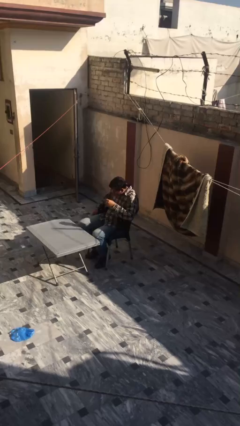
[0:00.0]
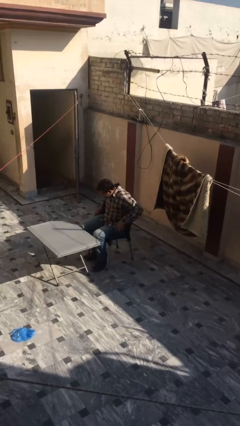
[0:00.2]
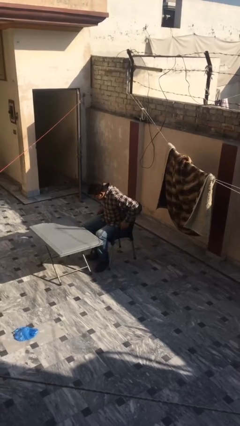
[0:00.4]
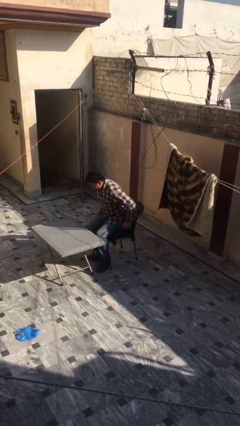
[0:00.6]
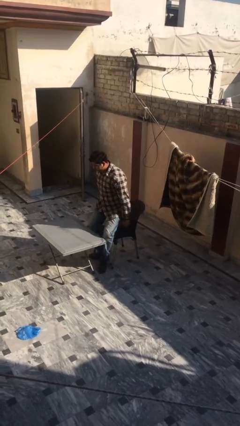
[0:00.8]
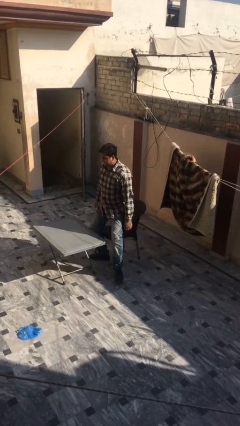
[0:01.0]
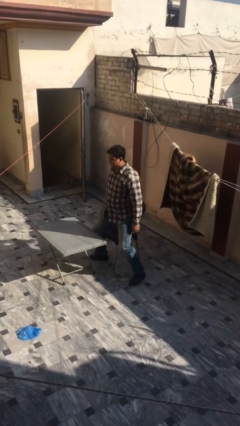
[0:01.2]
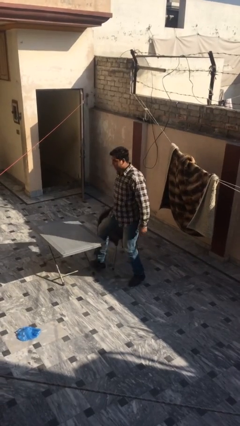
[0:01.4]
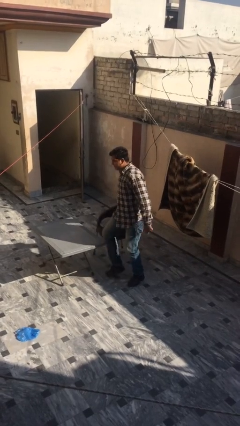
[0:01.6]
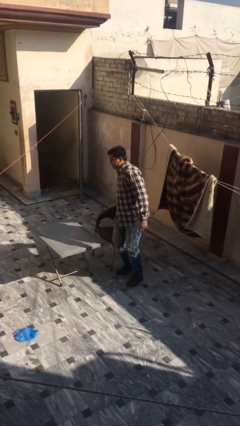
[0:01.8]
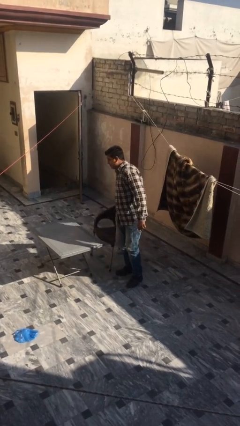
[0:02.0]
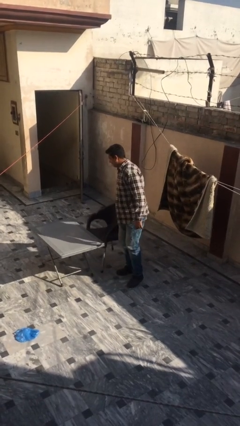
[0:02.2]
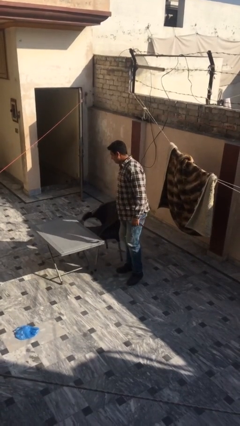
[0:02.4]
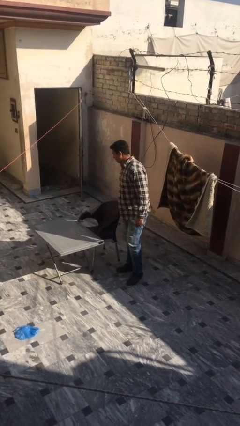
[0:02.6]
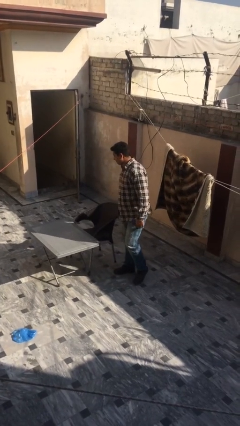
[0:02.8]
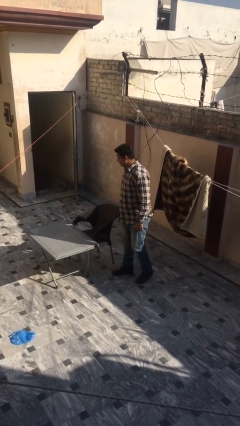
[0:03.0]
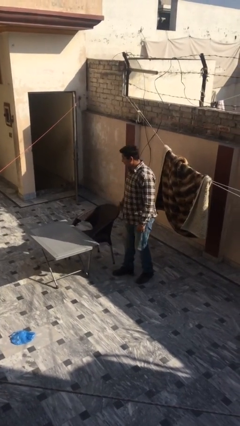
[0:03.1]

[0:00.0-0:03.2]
person stands up

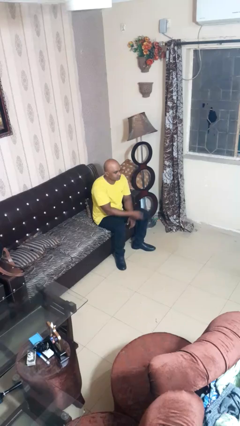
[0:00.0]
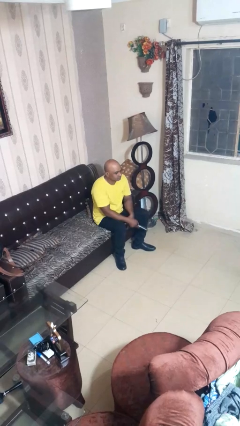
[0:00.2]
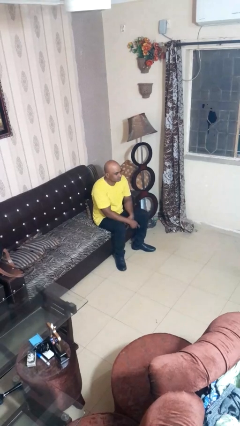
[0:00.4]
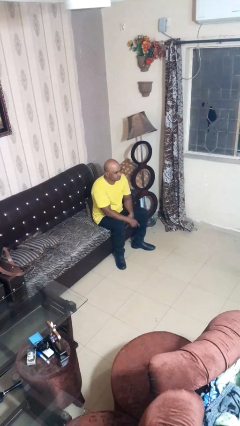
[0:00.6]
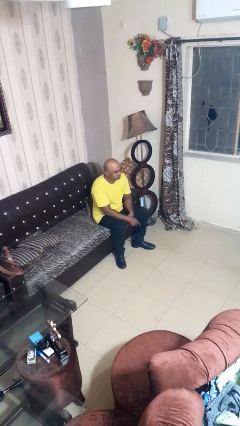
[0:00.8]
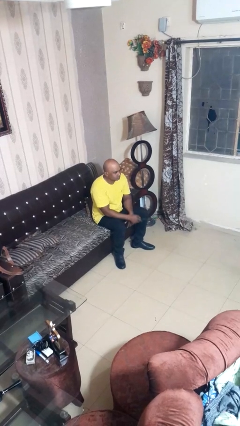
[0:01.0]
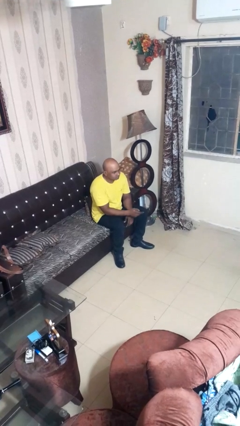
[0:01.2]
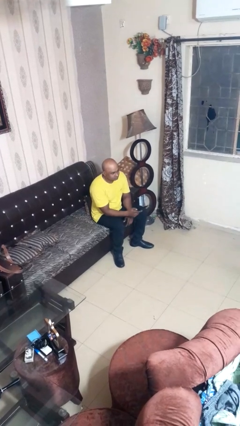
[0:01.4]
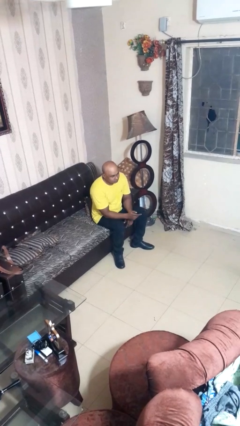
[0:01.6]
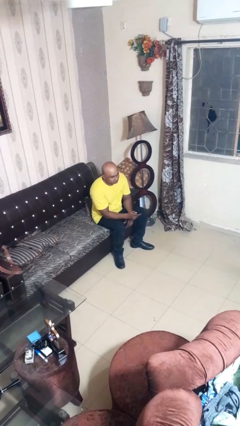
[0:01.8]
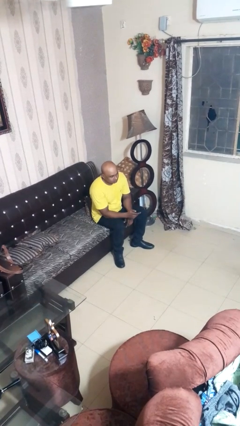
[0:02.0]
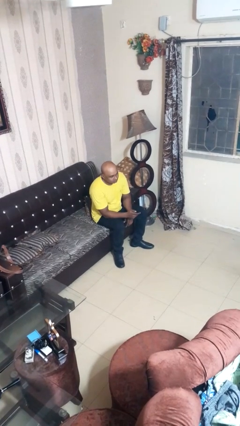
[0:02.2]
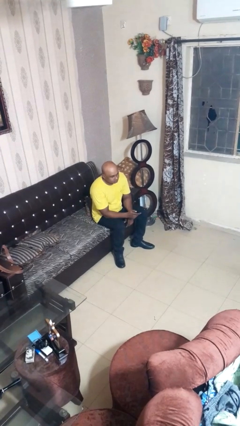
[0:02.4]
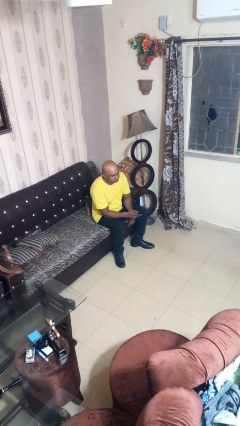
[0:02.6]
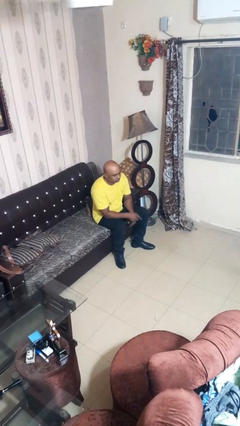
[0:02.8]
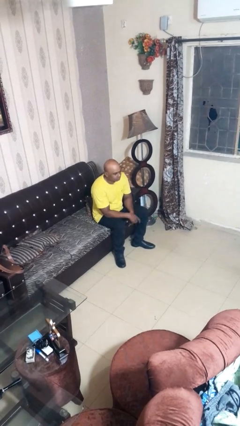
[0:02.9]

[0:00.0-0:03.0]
person uses television remote

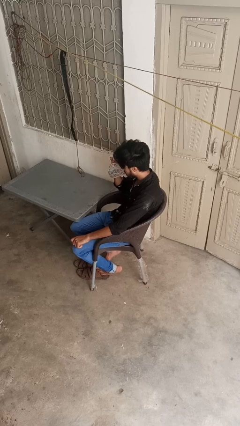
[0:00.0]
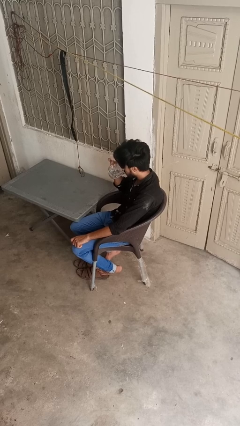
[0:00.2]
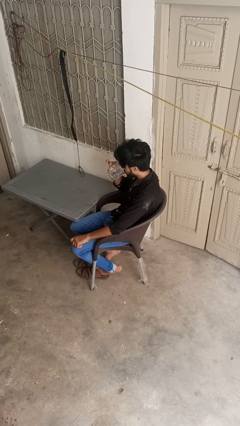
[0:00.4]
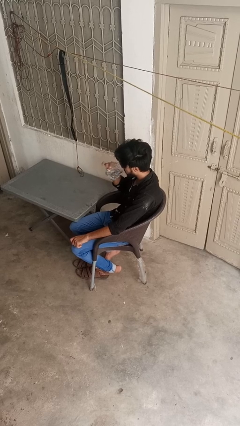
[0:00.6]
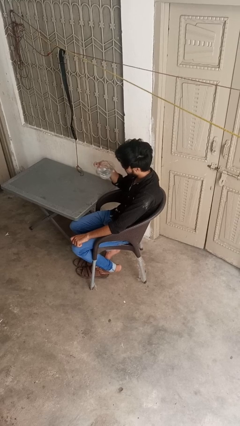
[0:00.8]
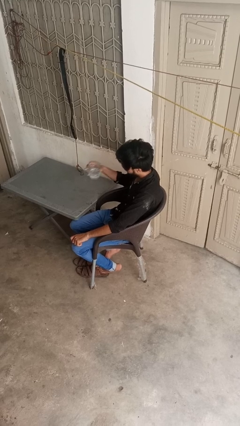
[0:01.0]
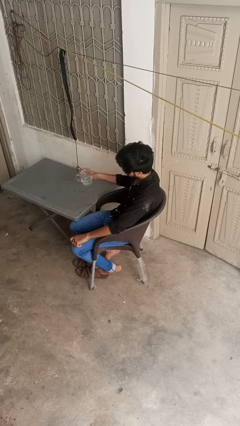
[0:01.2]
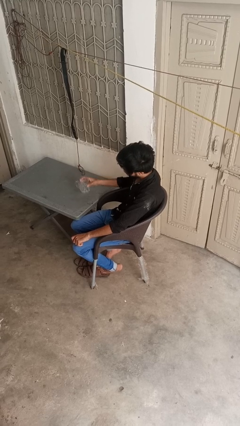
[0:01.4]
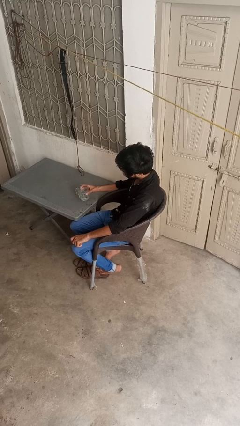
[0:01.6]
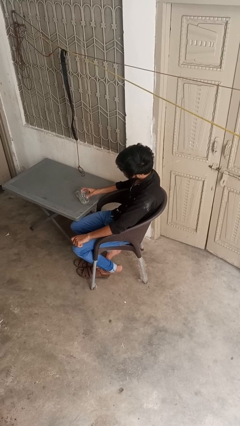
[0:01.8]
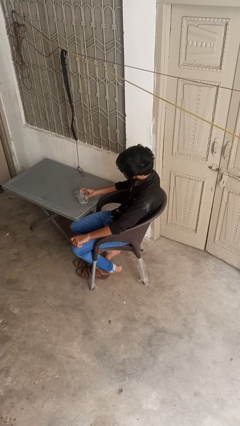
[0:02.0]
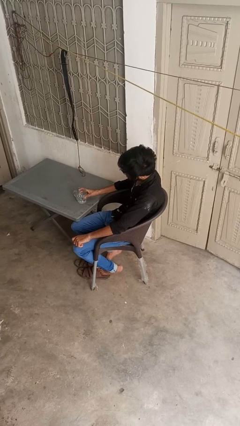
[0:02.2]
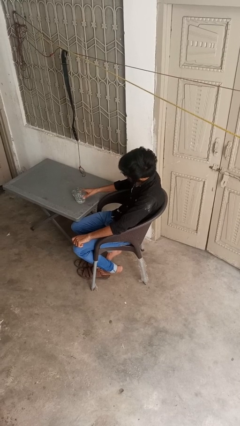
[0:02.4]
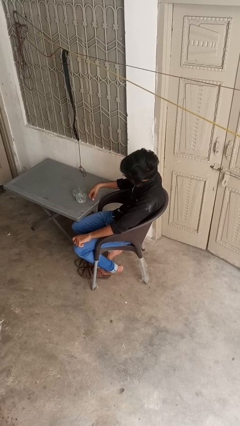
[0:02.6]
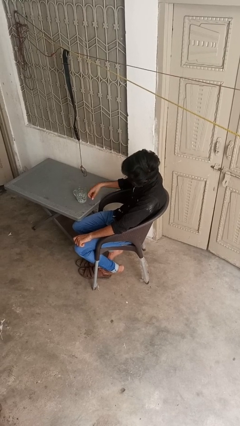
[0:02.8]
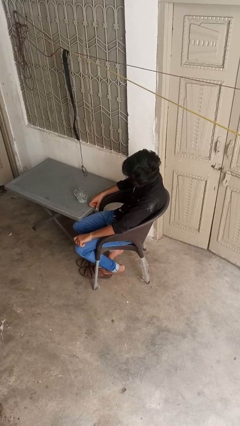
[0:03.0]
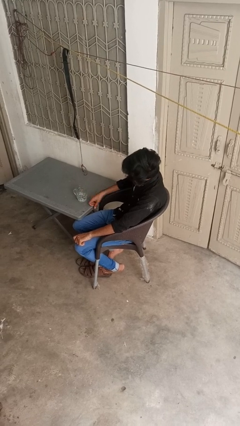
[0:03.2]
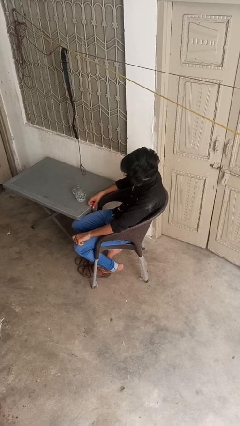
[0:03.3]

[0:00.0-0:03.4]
person puts down object on table

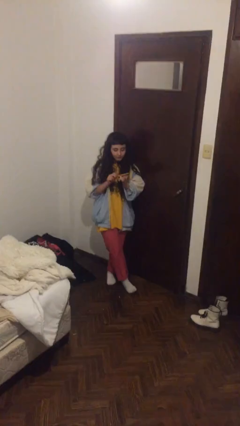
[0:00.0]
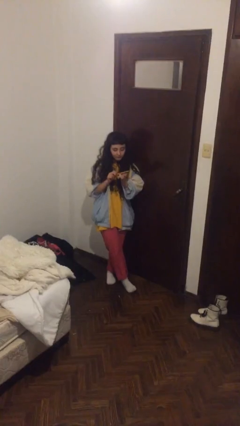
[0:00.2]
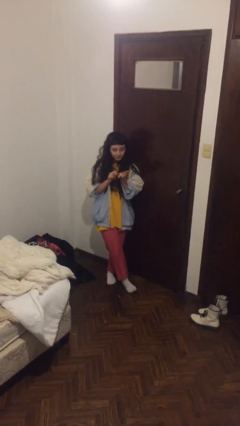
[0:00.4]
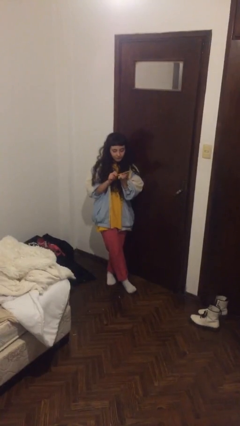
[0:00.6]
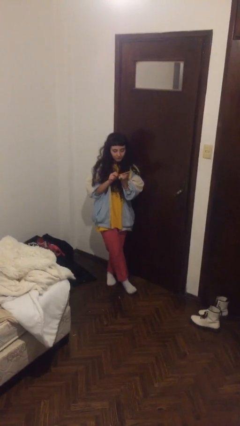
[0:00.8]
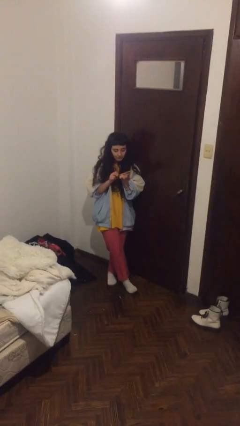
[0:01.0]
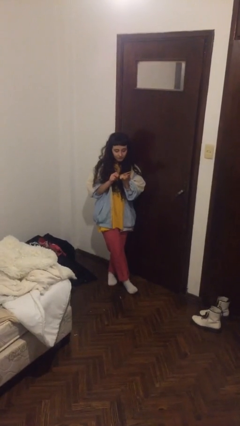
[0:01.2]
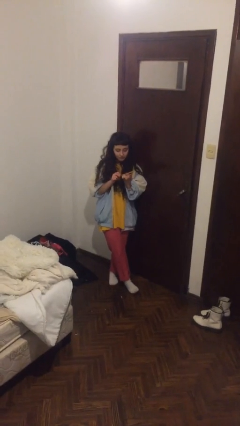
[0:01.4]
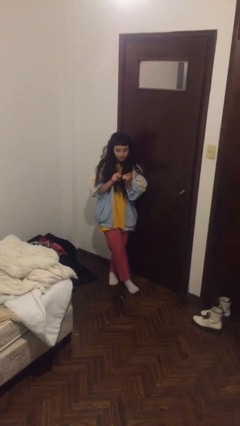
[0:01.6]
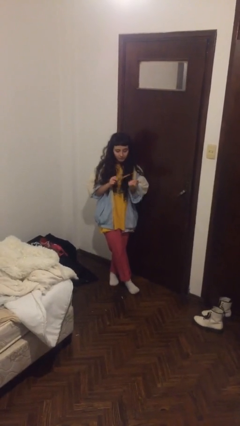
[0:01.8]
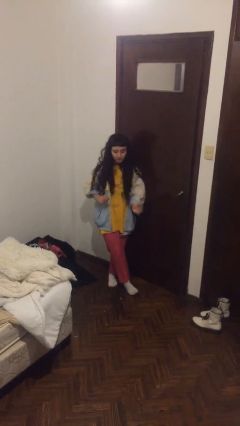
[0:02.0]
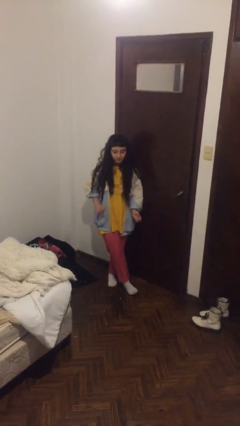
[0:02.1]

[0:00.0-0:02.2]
person files fingernails

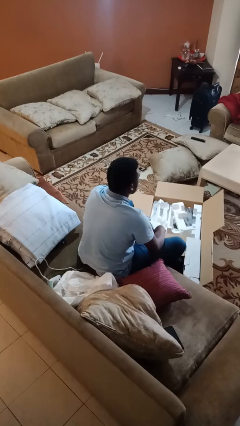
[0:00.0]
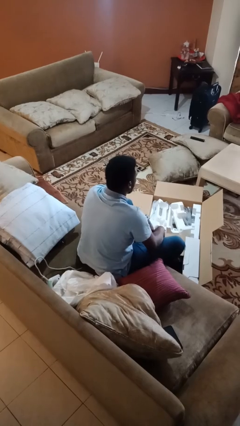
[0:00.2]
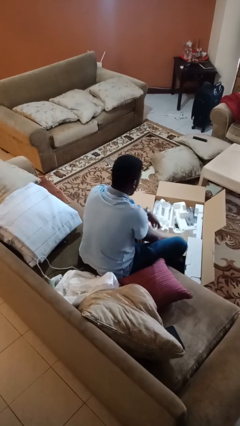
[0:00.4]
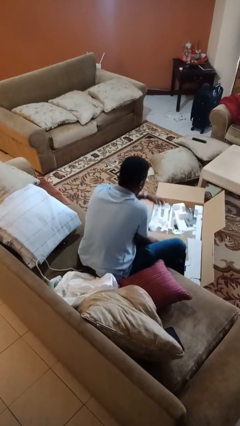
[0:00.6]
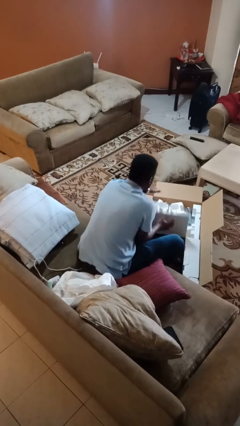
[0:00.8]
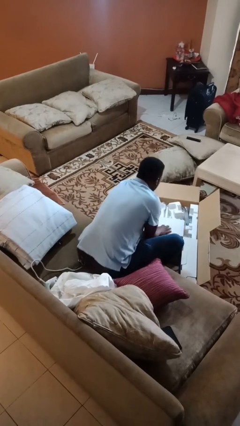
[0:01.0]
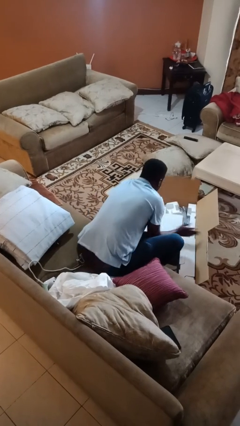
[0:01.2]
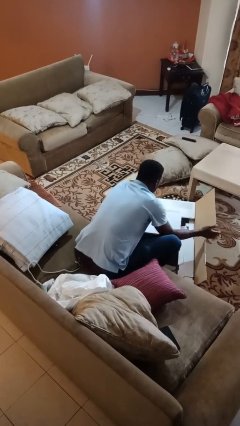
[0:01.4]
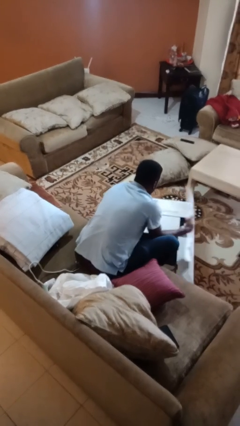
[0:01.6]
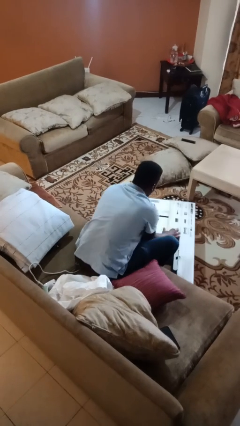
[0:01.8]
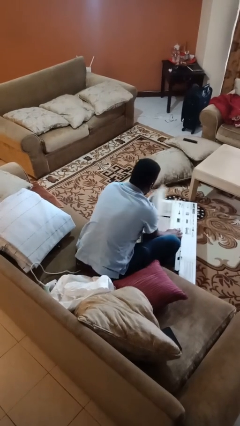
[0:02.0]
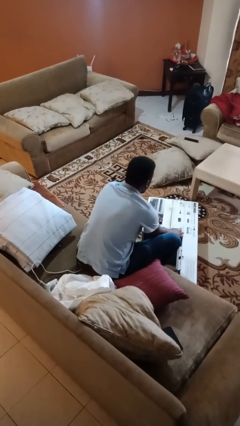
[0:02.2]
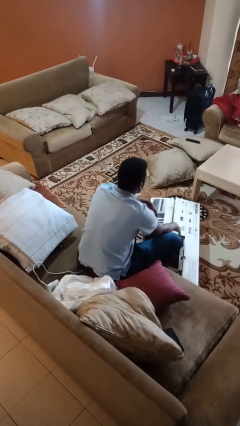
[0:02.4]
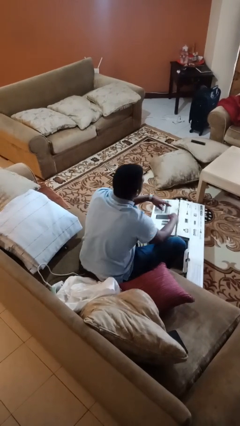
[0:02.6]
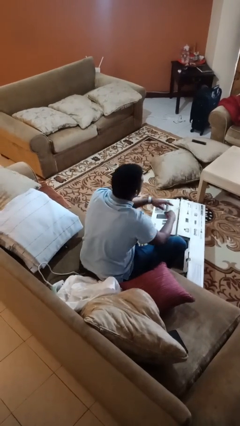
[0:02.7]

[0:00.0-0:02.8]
person closes box

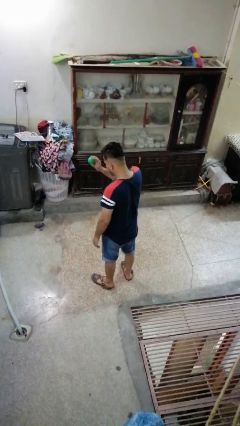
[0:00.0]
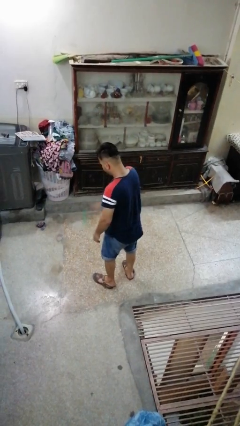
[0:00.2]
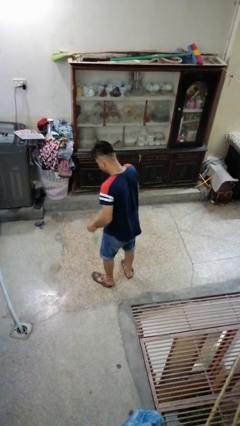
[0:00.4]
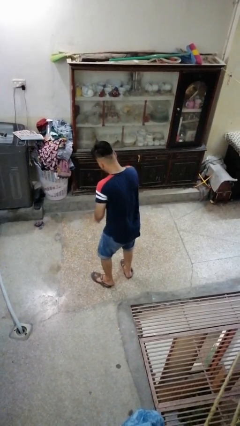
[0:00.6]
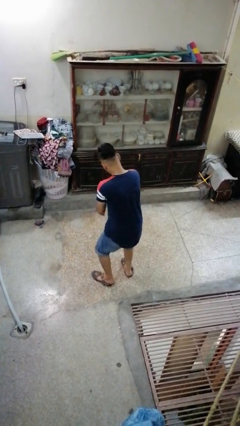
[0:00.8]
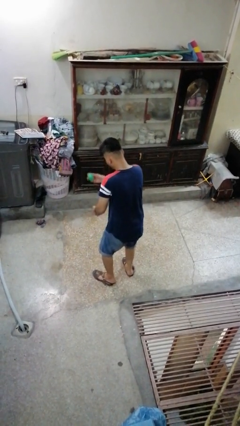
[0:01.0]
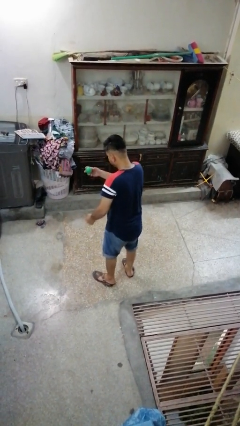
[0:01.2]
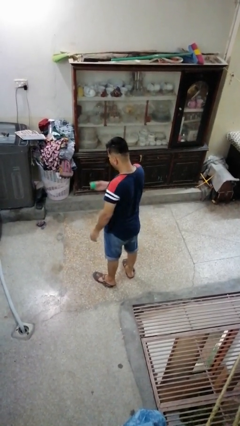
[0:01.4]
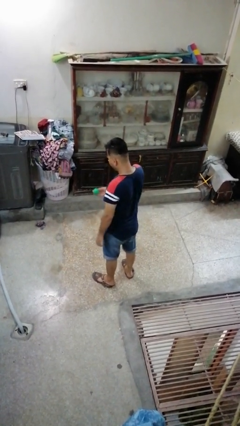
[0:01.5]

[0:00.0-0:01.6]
person bounces ball on floor

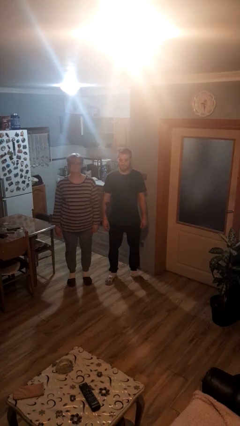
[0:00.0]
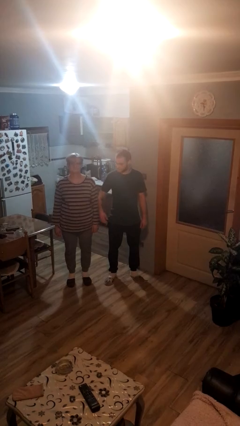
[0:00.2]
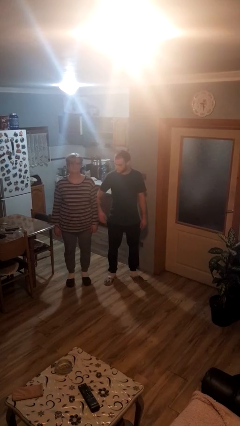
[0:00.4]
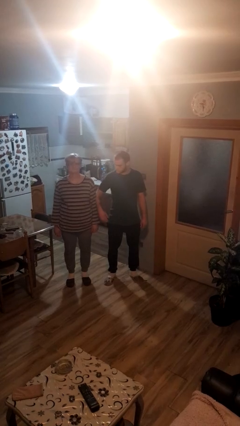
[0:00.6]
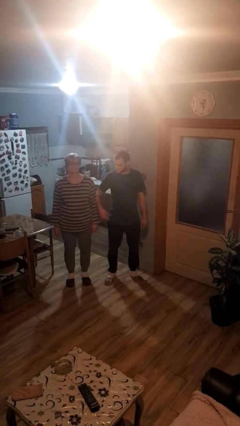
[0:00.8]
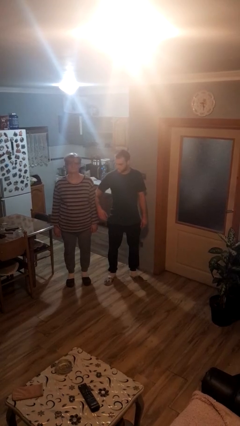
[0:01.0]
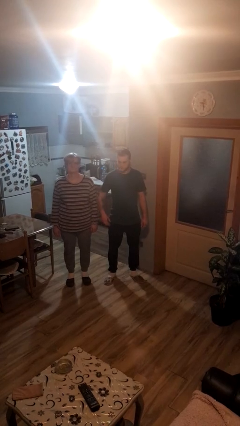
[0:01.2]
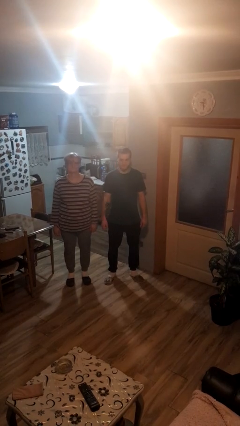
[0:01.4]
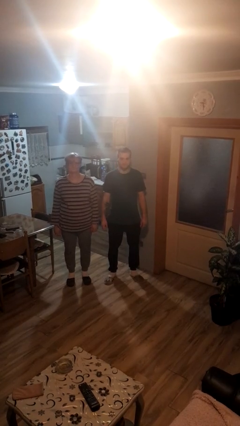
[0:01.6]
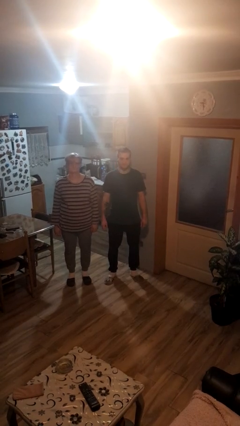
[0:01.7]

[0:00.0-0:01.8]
person nudges person with elbow
